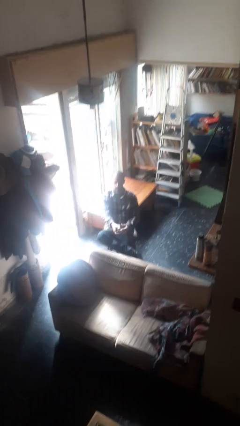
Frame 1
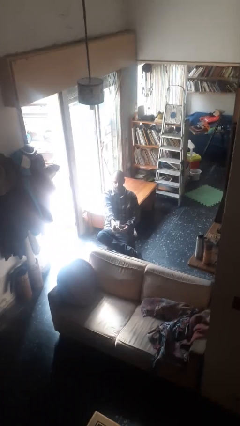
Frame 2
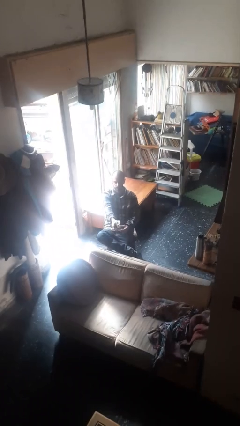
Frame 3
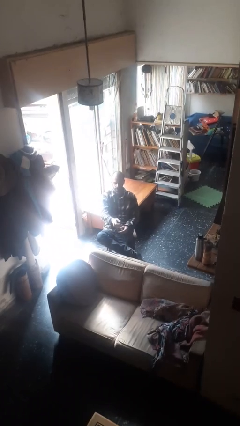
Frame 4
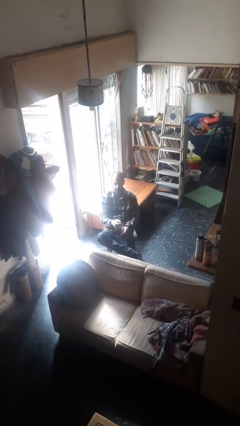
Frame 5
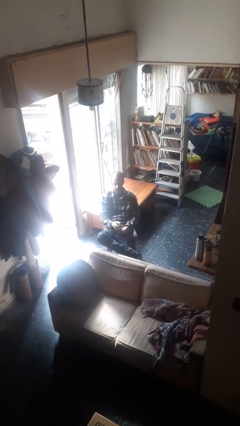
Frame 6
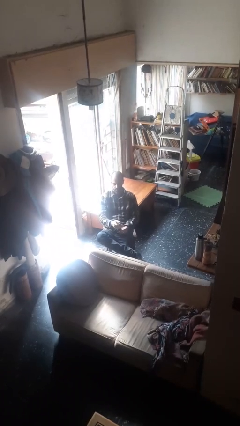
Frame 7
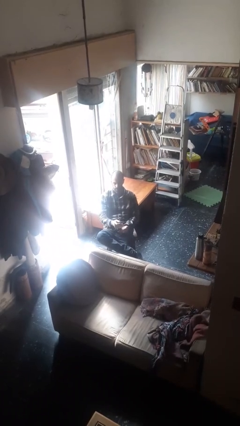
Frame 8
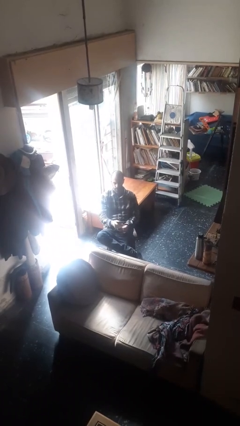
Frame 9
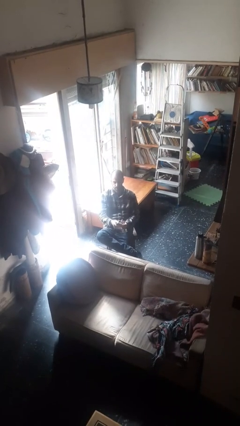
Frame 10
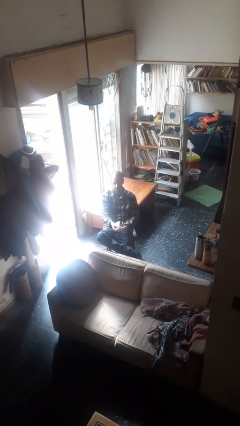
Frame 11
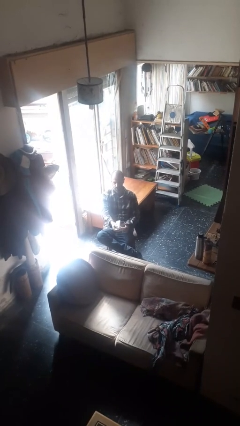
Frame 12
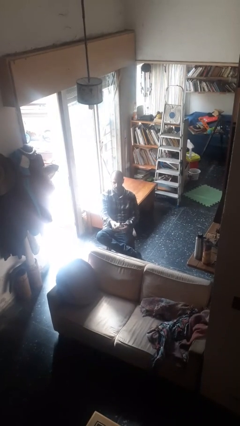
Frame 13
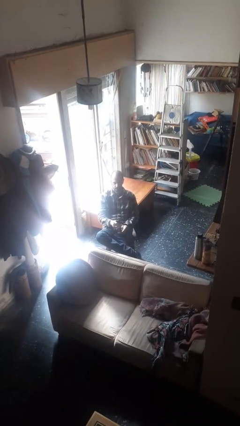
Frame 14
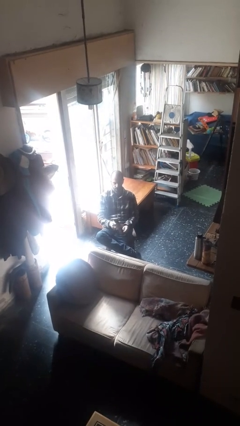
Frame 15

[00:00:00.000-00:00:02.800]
person uses television remote

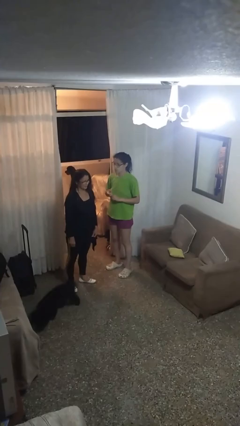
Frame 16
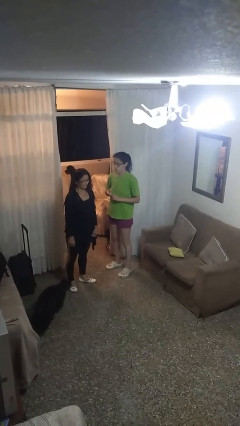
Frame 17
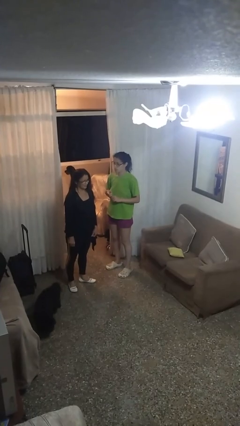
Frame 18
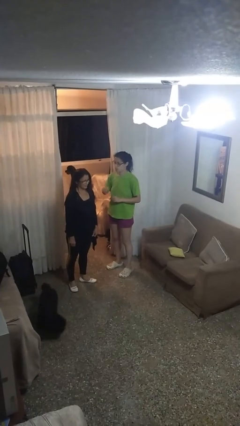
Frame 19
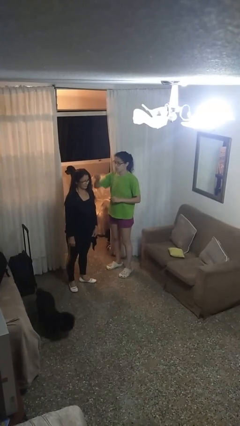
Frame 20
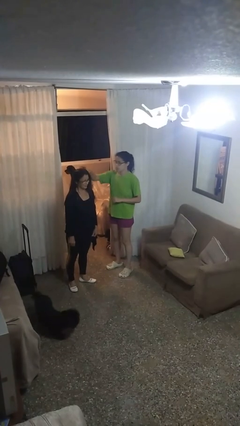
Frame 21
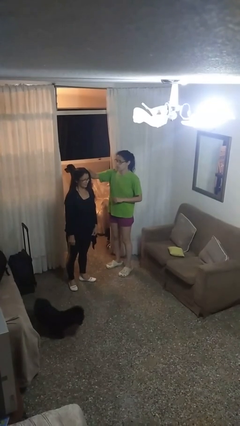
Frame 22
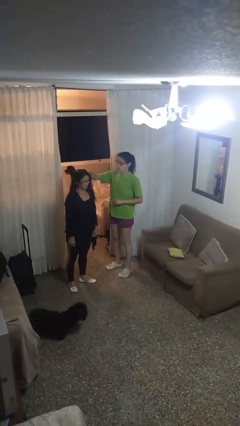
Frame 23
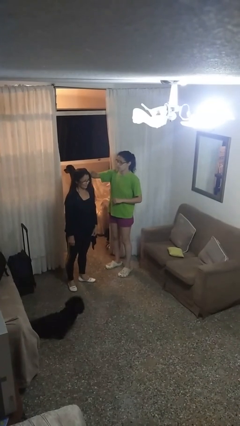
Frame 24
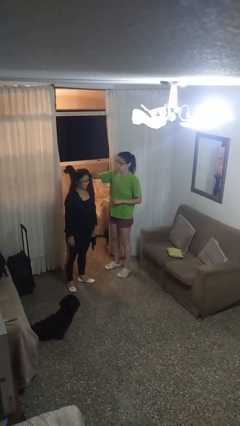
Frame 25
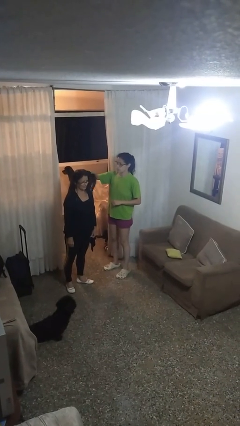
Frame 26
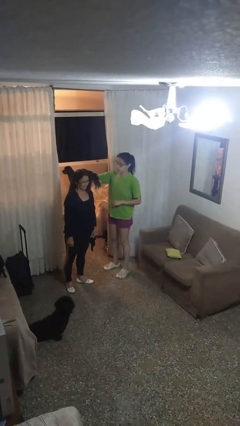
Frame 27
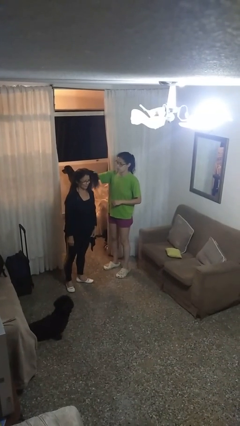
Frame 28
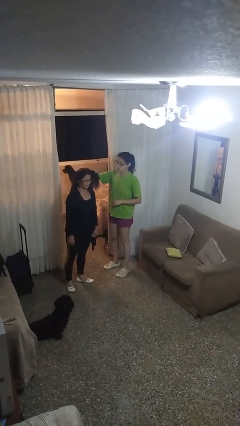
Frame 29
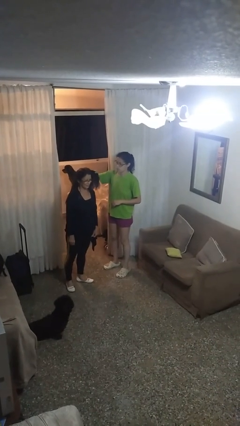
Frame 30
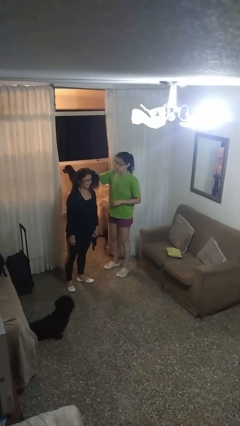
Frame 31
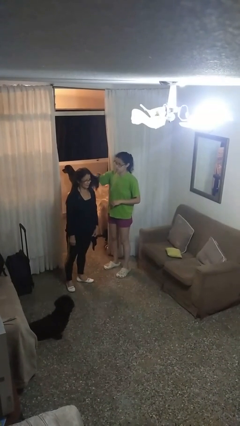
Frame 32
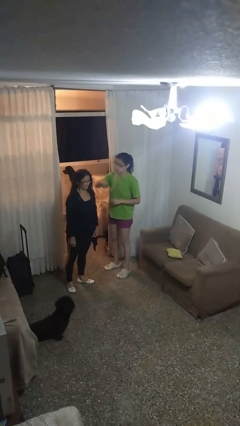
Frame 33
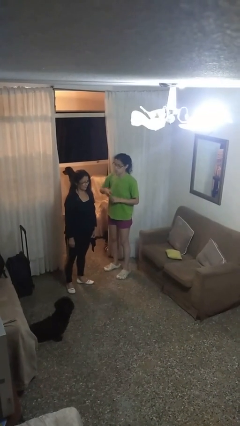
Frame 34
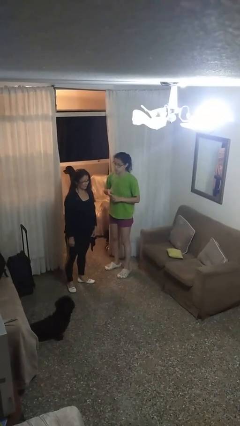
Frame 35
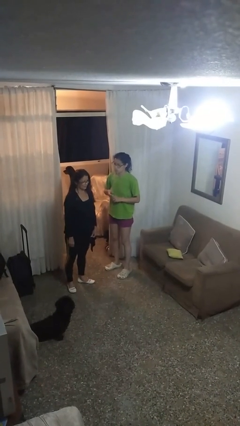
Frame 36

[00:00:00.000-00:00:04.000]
person grabs person by hair

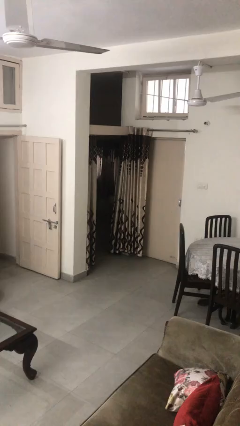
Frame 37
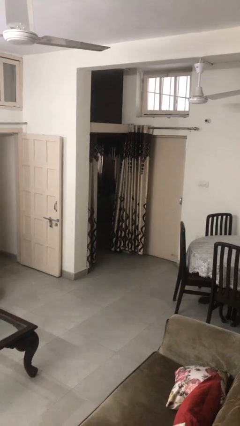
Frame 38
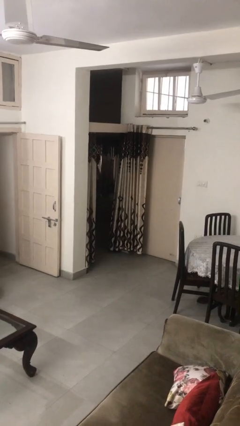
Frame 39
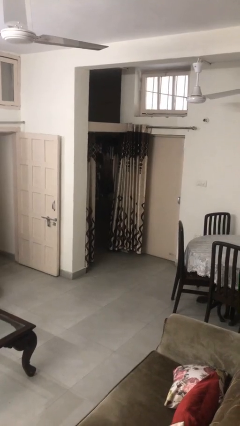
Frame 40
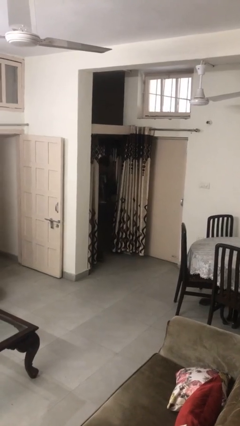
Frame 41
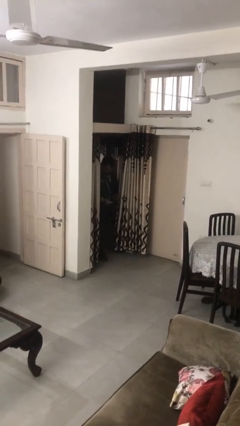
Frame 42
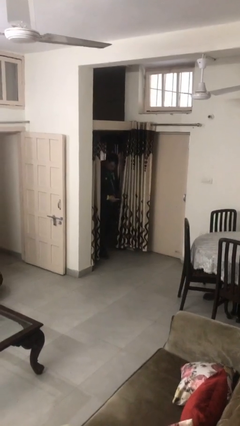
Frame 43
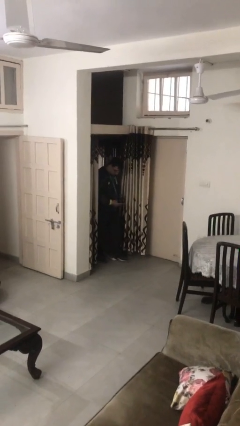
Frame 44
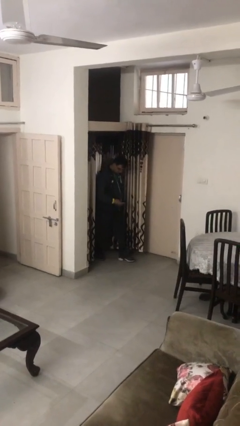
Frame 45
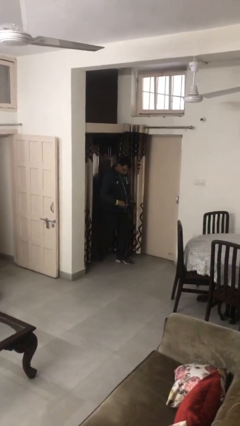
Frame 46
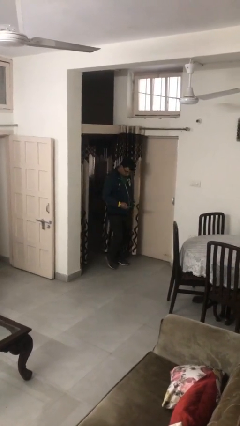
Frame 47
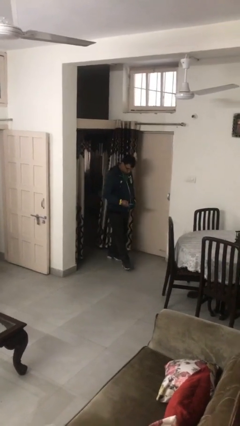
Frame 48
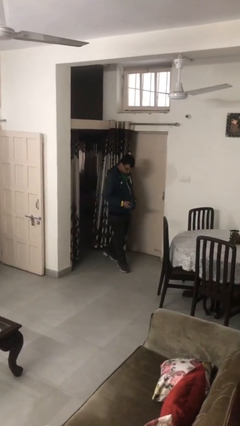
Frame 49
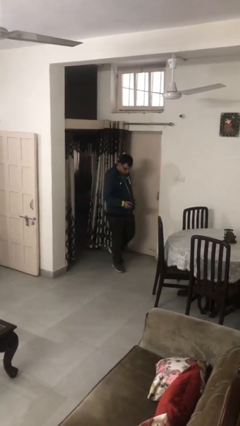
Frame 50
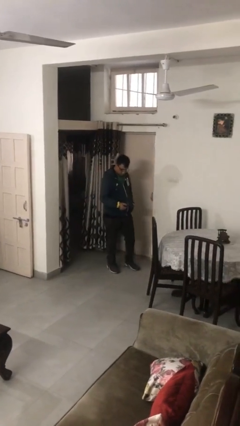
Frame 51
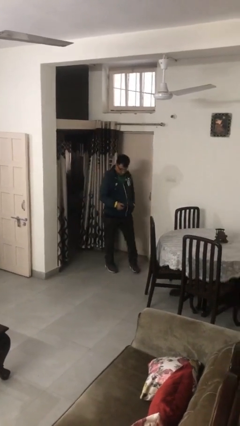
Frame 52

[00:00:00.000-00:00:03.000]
person enters scene through structure

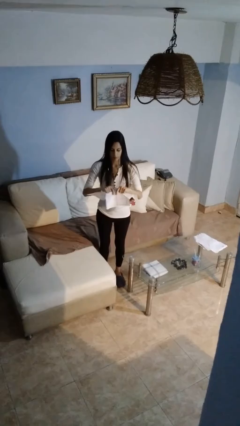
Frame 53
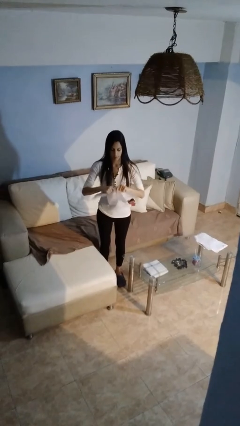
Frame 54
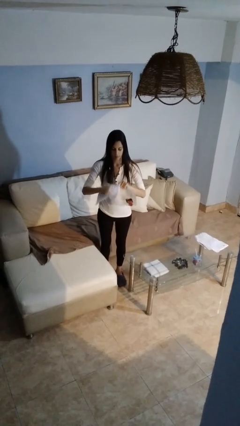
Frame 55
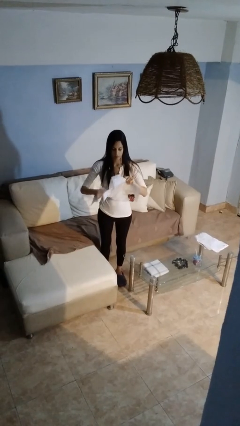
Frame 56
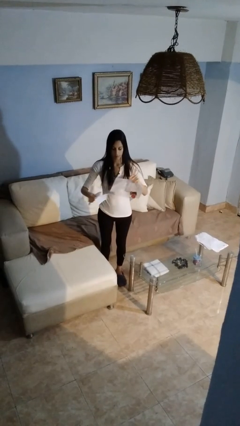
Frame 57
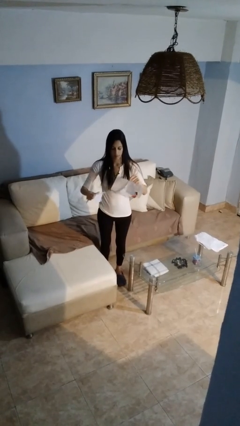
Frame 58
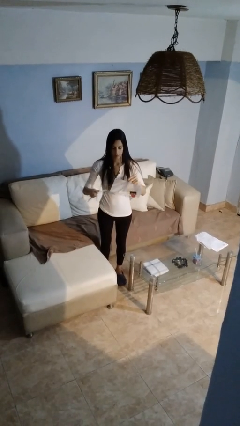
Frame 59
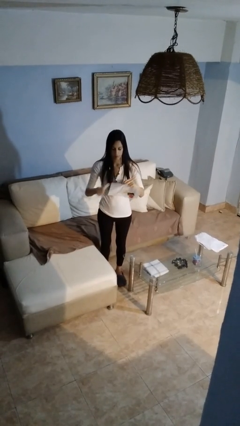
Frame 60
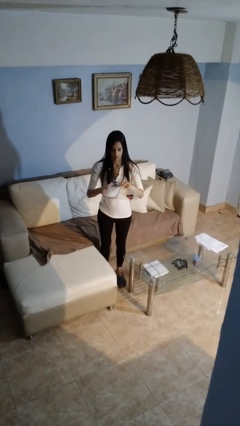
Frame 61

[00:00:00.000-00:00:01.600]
person tears paper

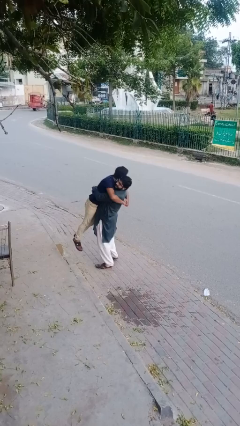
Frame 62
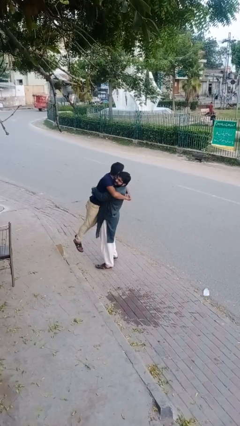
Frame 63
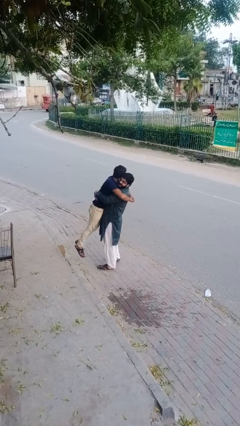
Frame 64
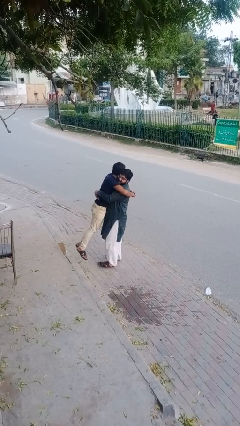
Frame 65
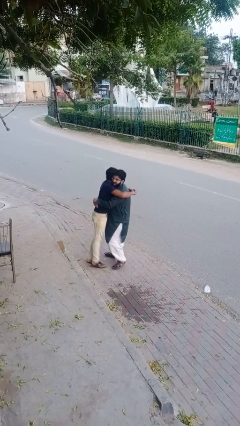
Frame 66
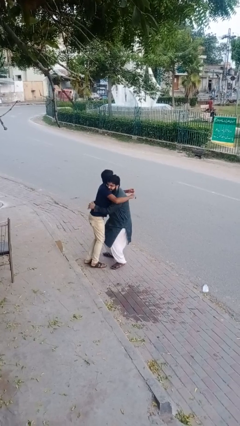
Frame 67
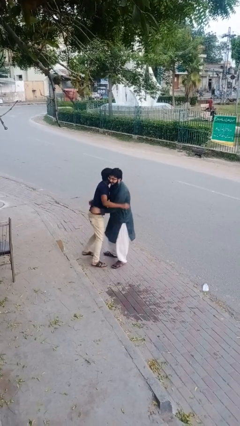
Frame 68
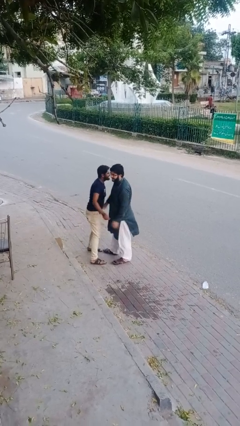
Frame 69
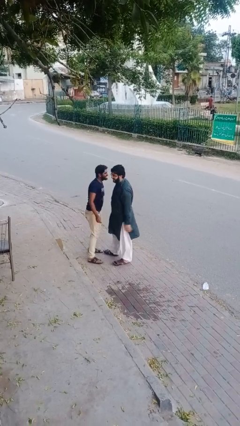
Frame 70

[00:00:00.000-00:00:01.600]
person puts down person

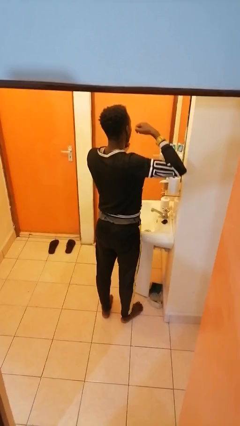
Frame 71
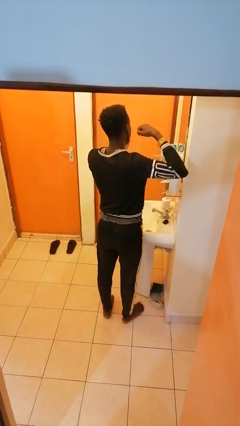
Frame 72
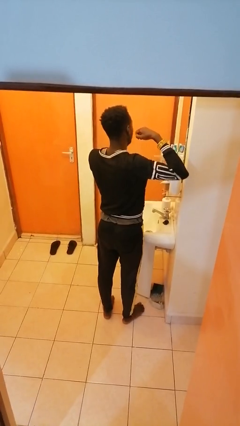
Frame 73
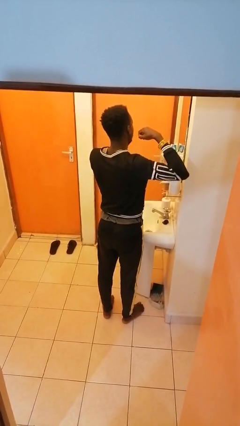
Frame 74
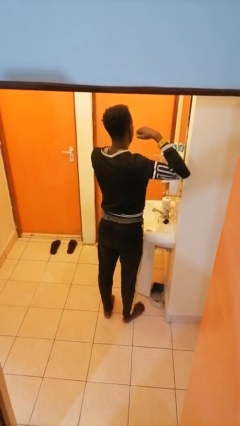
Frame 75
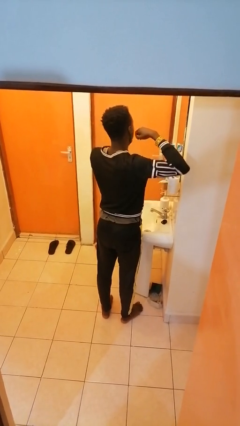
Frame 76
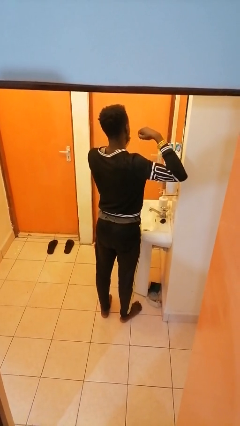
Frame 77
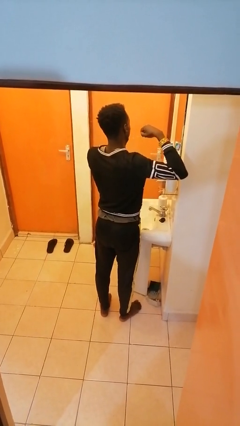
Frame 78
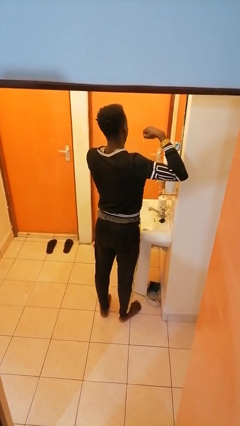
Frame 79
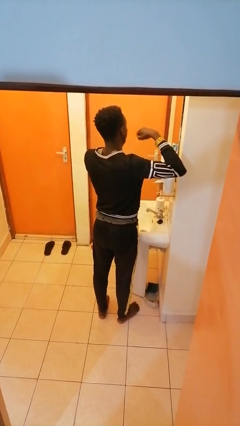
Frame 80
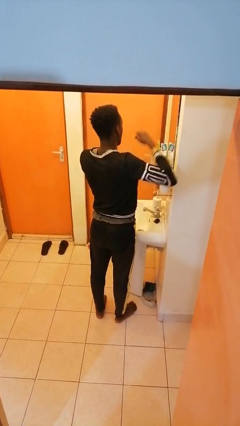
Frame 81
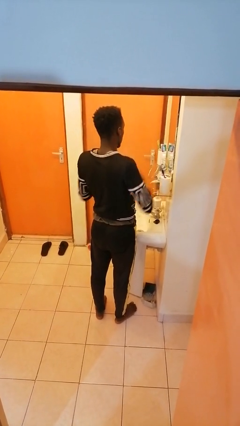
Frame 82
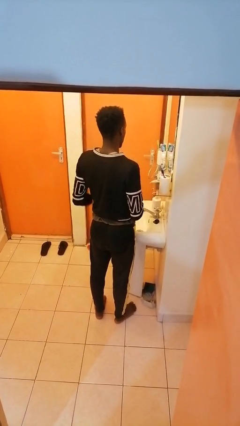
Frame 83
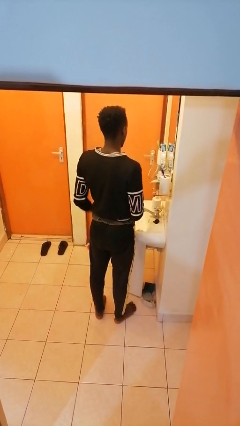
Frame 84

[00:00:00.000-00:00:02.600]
person flosses

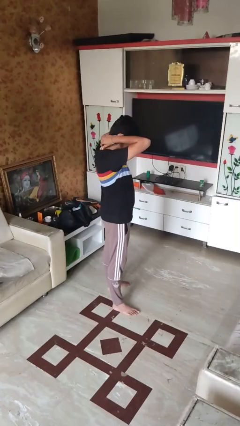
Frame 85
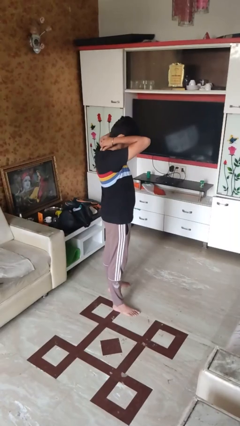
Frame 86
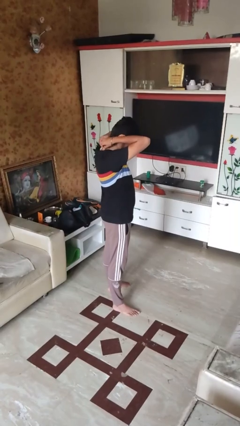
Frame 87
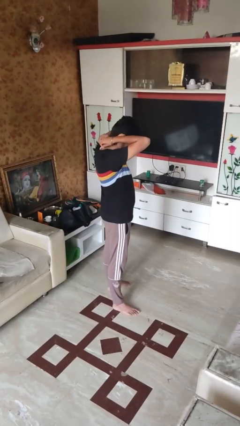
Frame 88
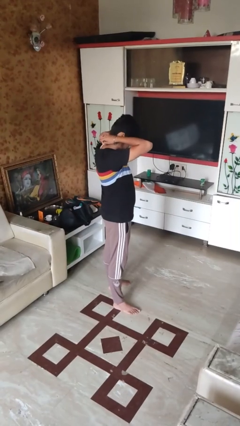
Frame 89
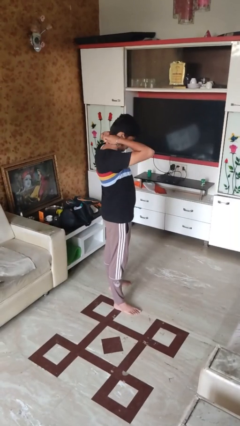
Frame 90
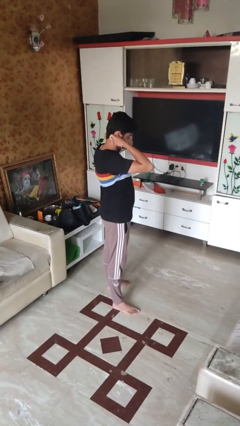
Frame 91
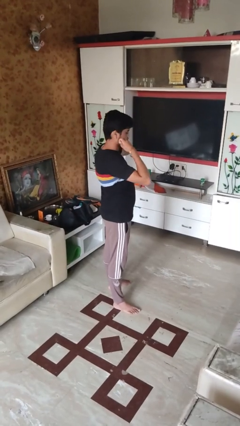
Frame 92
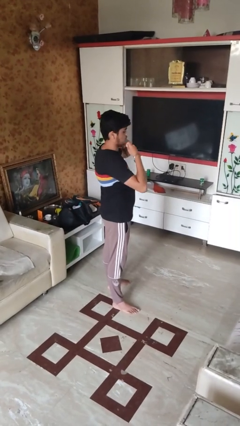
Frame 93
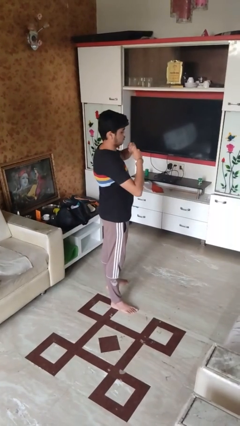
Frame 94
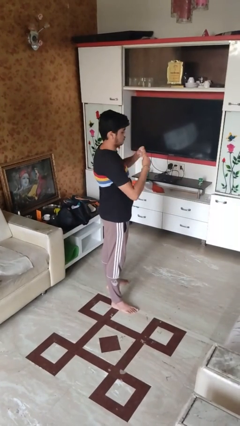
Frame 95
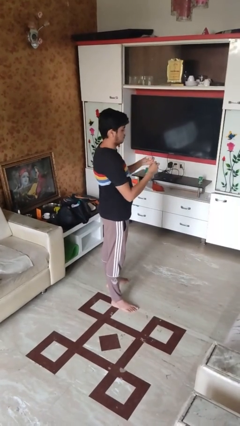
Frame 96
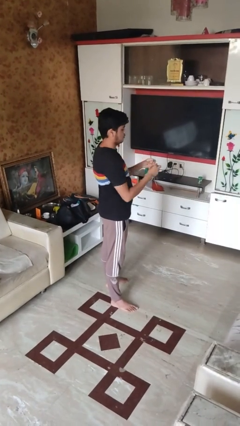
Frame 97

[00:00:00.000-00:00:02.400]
person takes off necklace
